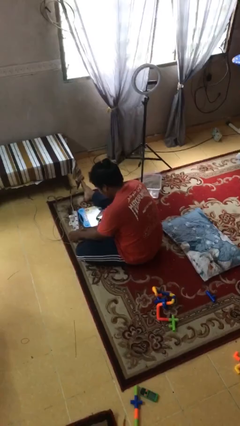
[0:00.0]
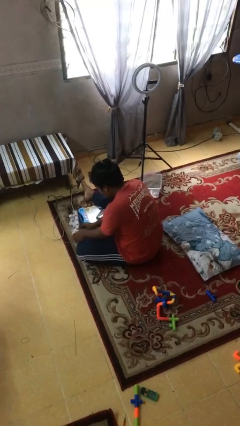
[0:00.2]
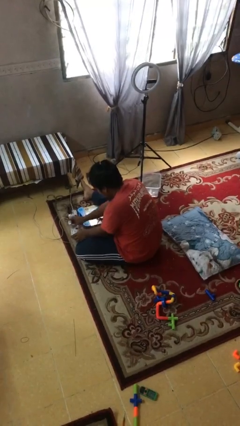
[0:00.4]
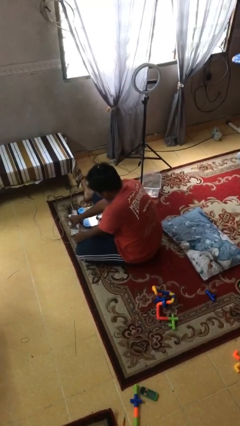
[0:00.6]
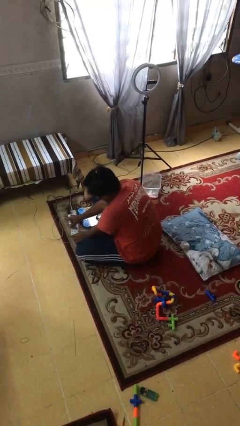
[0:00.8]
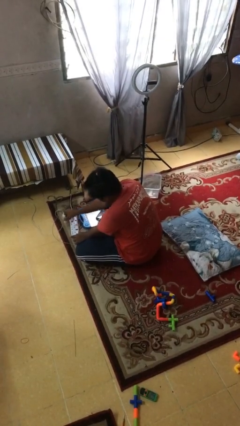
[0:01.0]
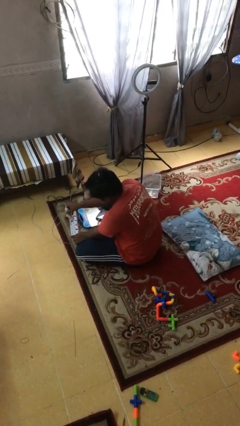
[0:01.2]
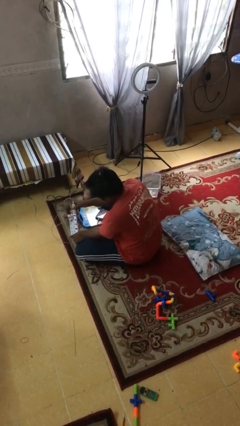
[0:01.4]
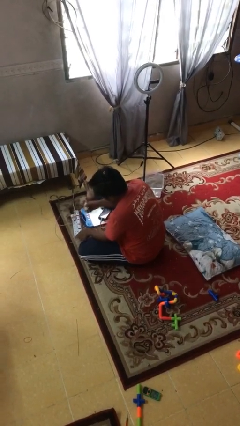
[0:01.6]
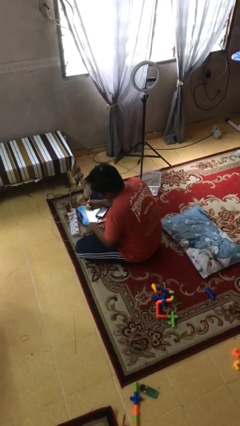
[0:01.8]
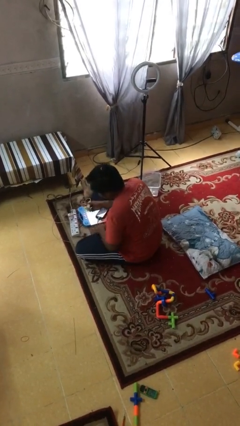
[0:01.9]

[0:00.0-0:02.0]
person unplugs from electrical socket

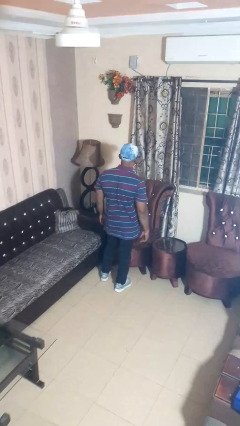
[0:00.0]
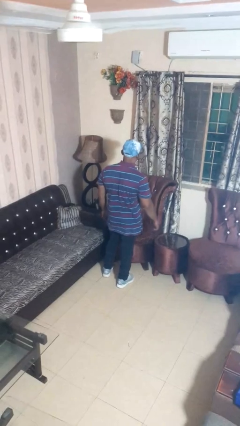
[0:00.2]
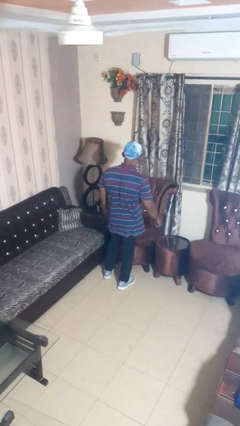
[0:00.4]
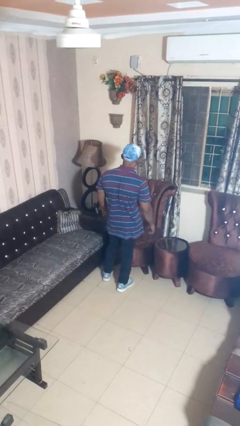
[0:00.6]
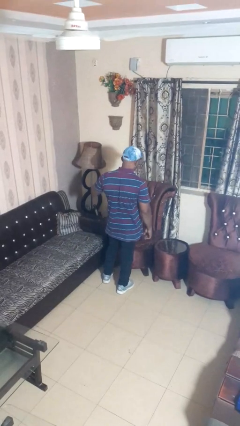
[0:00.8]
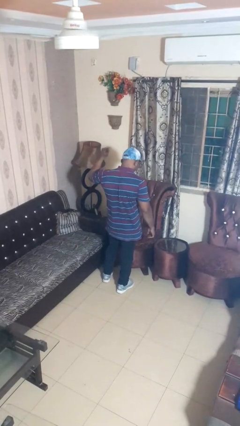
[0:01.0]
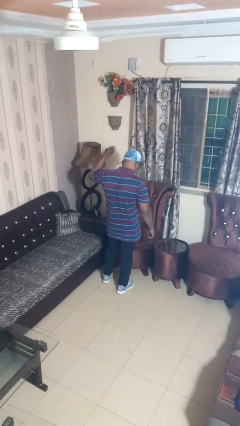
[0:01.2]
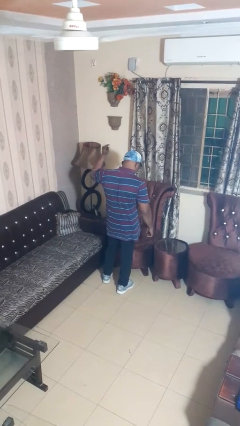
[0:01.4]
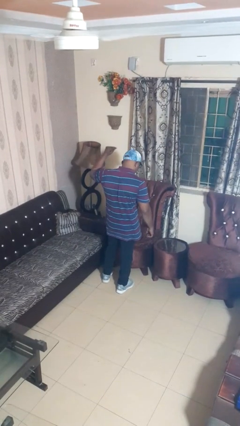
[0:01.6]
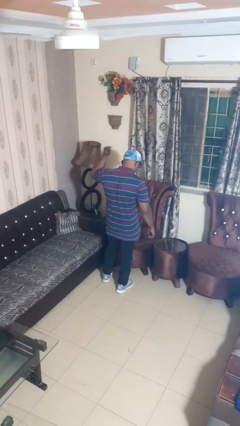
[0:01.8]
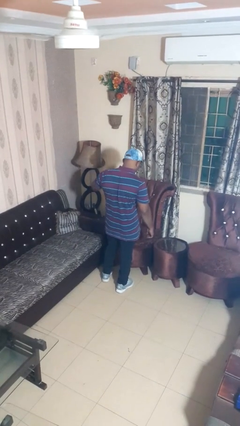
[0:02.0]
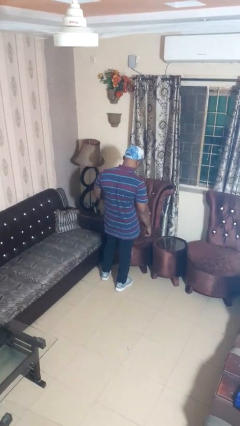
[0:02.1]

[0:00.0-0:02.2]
person snaps fingers

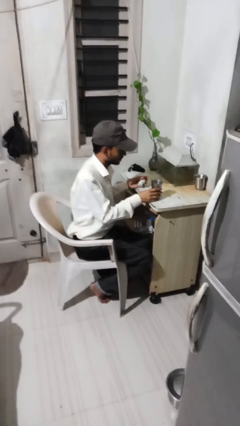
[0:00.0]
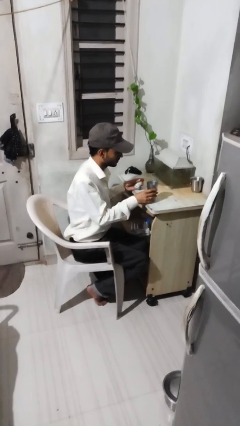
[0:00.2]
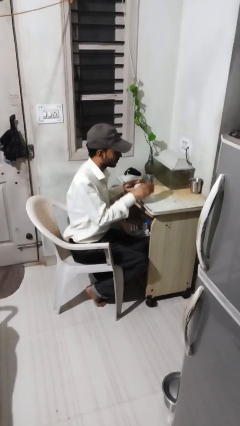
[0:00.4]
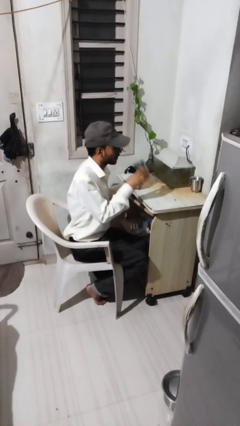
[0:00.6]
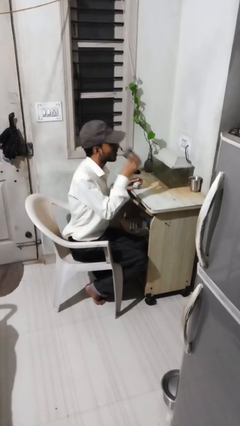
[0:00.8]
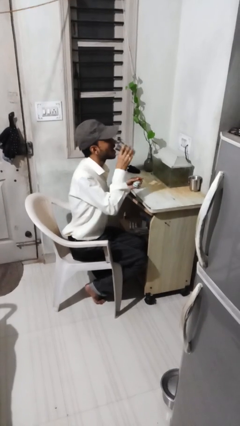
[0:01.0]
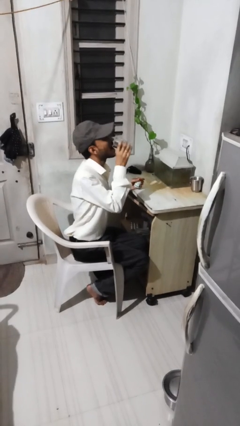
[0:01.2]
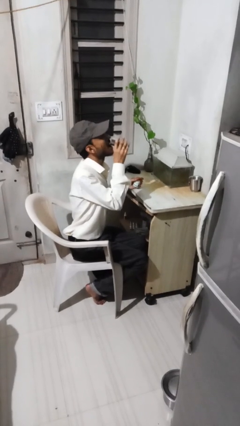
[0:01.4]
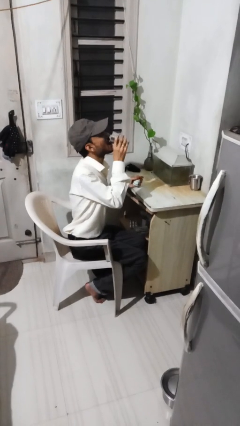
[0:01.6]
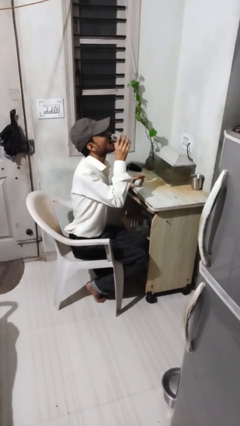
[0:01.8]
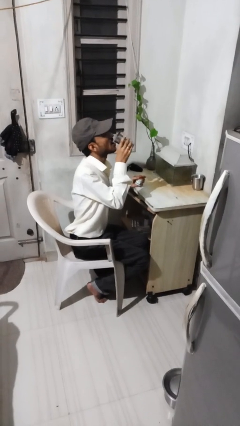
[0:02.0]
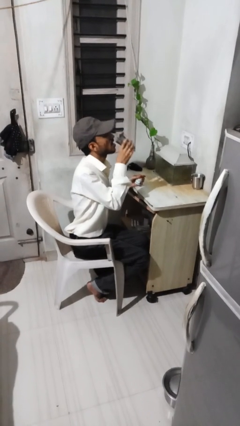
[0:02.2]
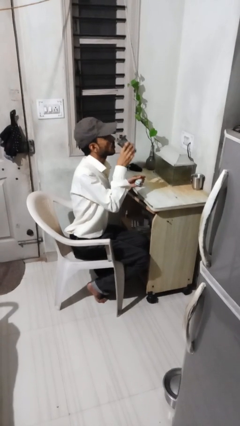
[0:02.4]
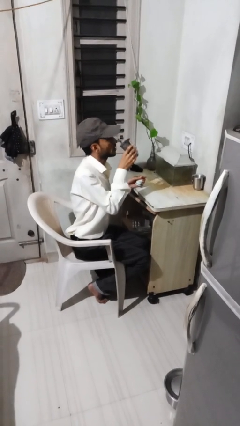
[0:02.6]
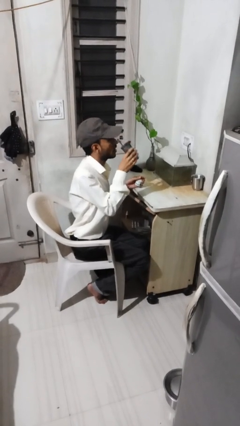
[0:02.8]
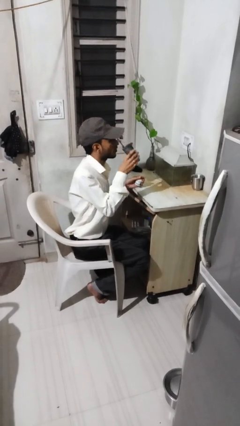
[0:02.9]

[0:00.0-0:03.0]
person drinks from cup

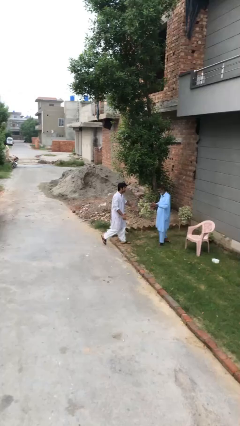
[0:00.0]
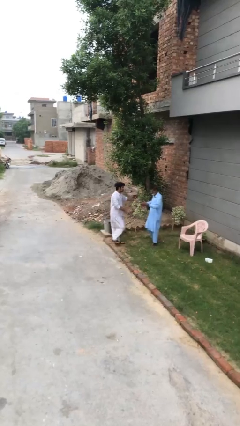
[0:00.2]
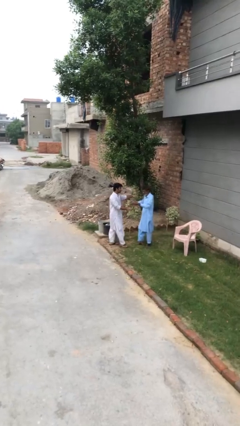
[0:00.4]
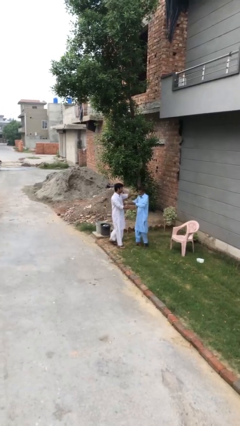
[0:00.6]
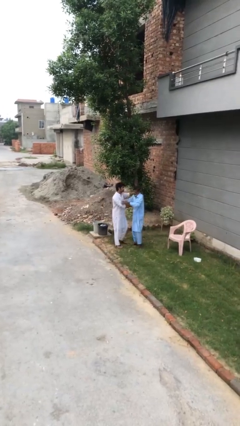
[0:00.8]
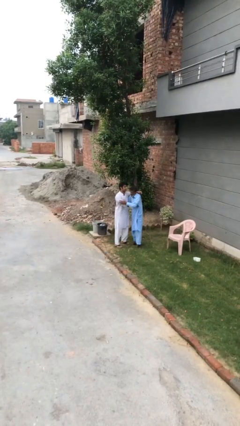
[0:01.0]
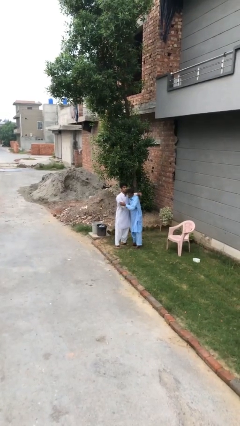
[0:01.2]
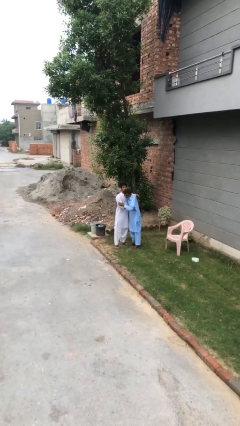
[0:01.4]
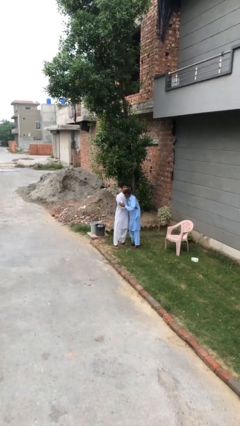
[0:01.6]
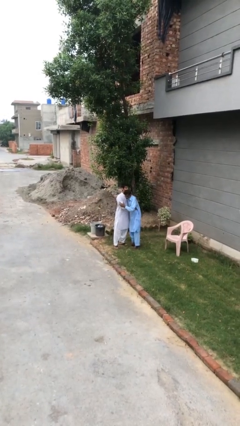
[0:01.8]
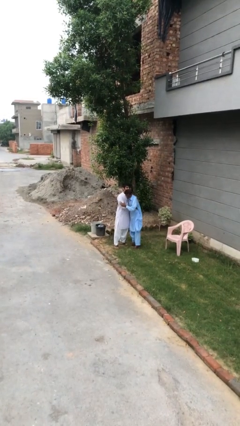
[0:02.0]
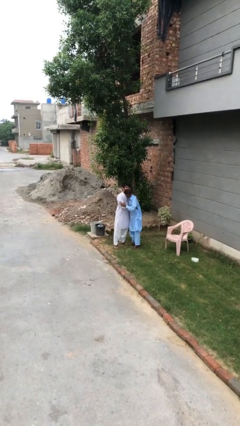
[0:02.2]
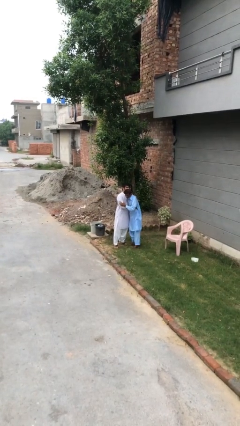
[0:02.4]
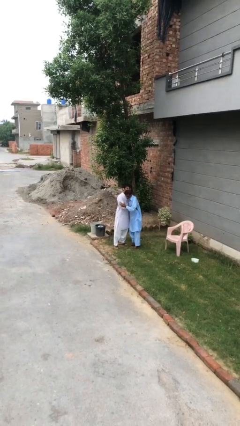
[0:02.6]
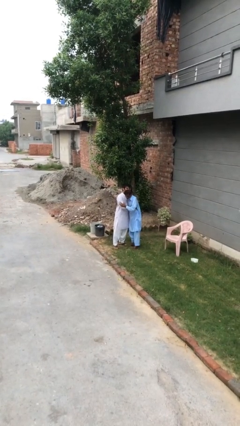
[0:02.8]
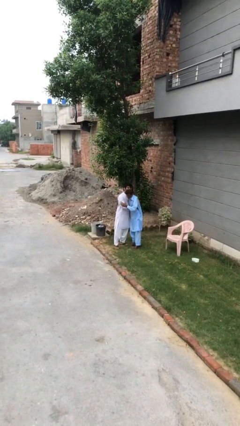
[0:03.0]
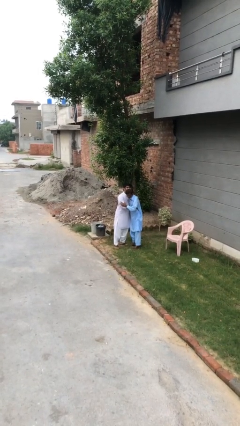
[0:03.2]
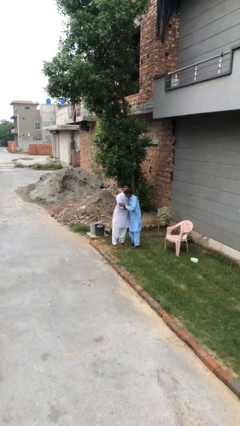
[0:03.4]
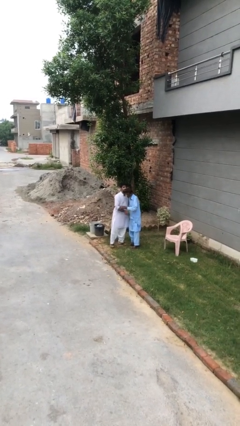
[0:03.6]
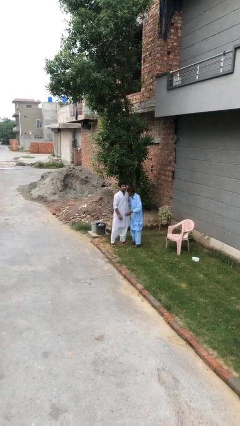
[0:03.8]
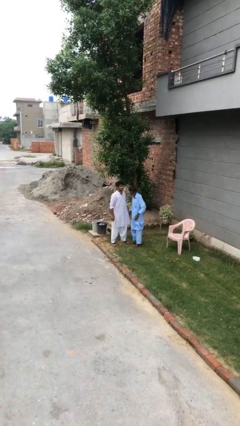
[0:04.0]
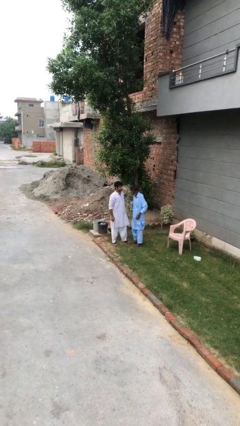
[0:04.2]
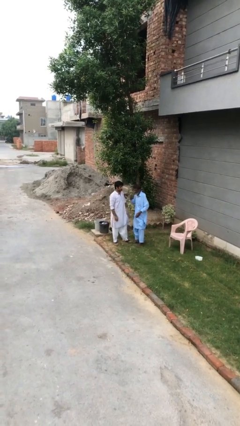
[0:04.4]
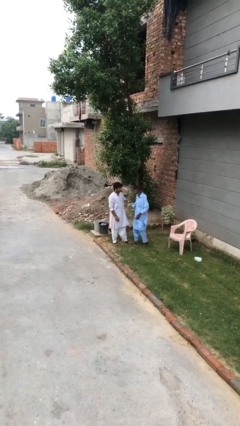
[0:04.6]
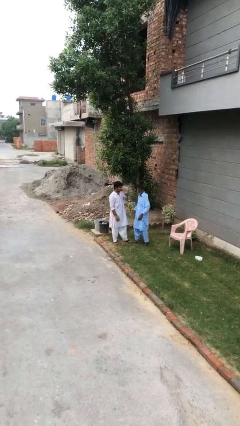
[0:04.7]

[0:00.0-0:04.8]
person embraces person

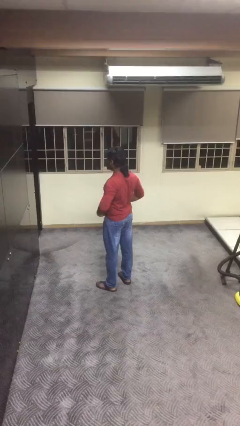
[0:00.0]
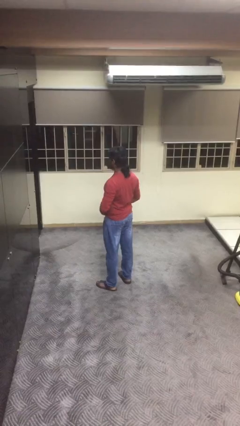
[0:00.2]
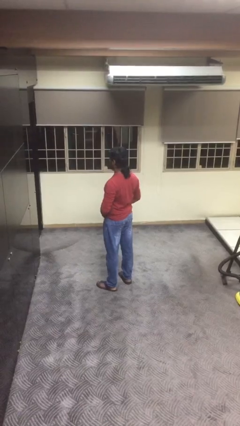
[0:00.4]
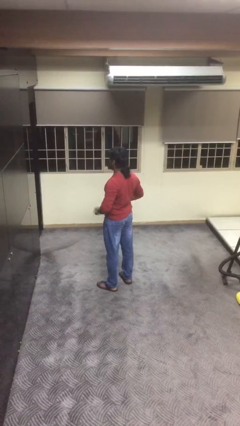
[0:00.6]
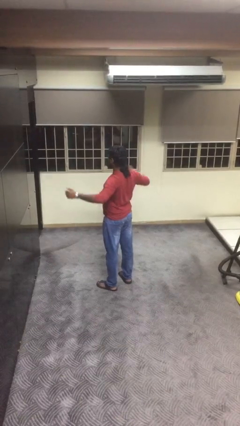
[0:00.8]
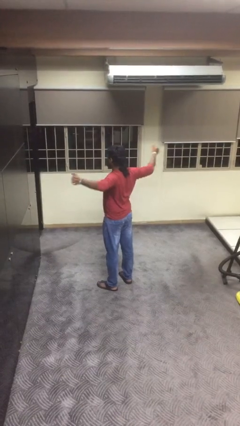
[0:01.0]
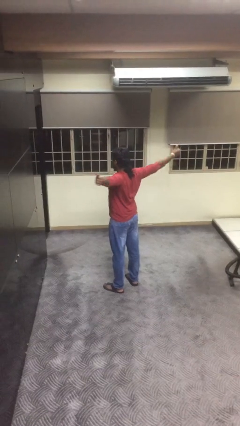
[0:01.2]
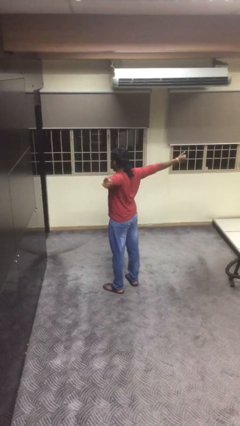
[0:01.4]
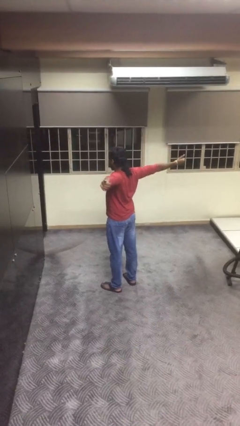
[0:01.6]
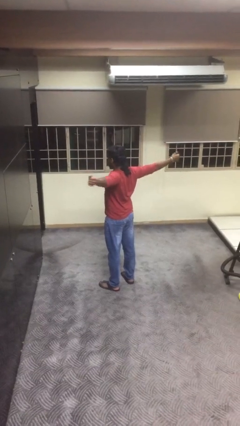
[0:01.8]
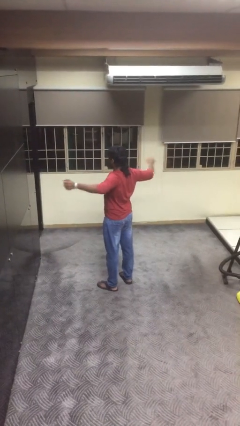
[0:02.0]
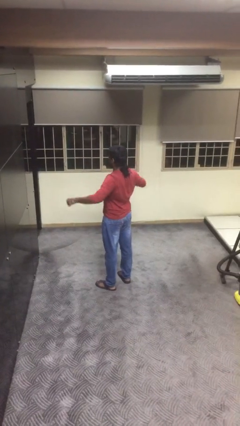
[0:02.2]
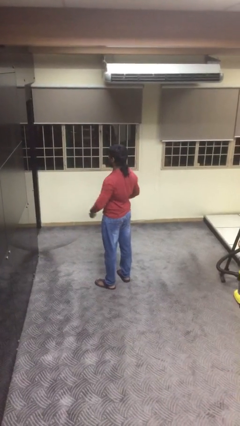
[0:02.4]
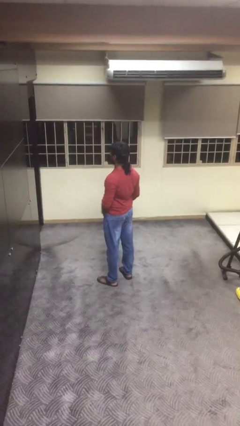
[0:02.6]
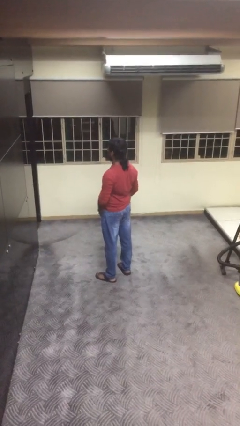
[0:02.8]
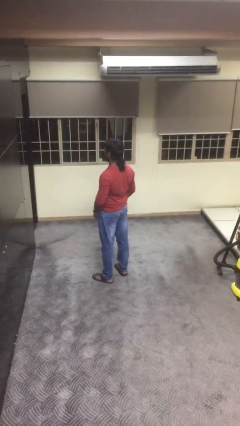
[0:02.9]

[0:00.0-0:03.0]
person stretches arms to side

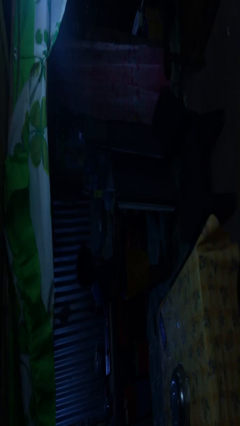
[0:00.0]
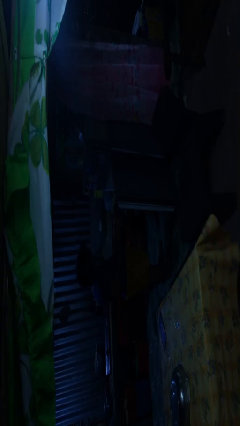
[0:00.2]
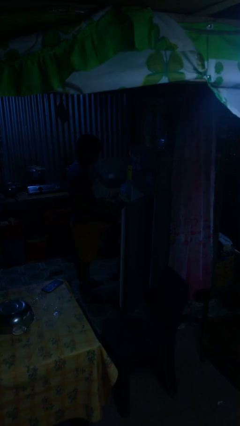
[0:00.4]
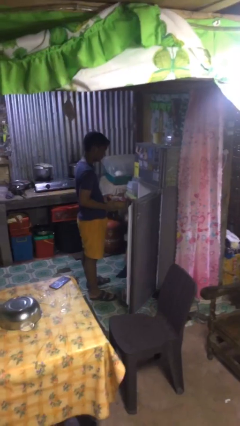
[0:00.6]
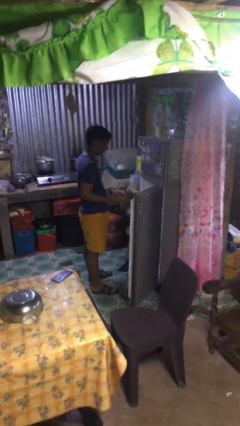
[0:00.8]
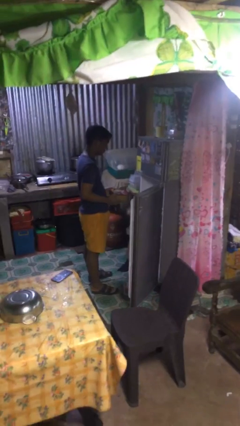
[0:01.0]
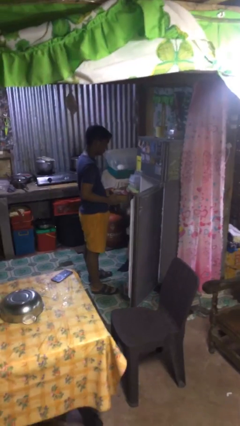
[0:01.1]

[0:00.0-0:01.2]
person puts object into refrigerator

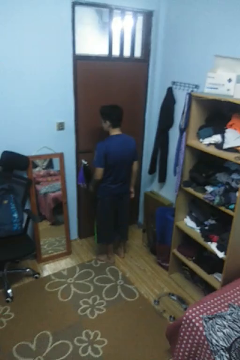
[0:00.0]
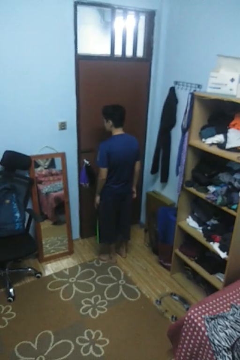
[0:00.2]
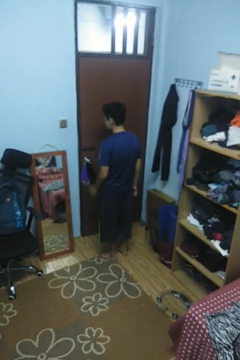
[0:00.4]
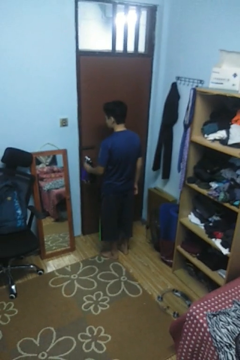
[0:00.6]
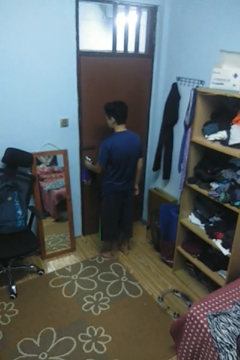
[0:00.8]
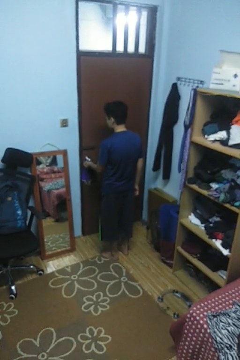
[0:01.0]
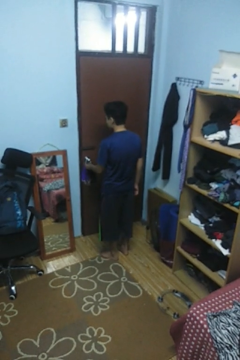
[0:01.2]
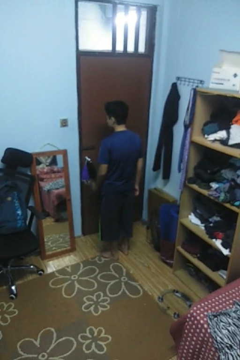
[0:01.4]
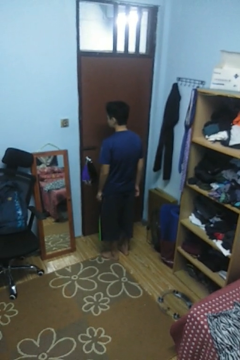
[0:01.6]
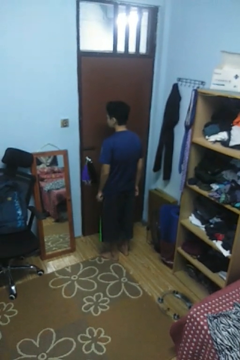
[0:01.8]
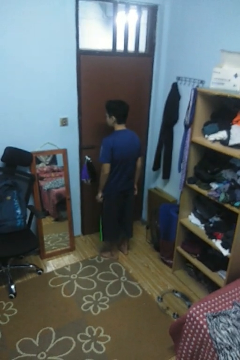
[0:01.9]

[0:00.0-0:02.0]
person locks door with keys
